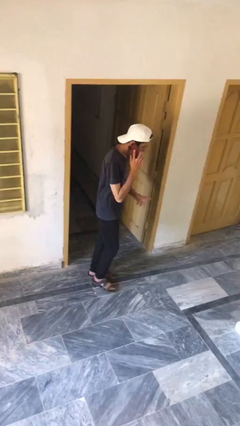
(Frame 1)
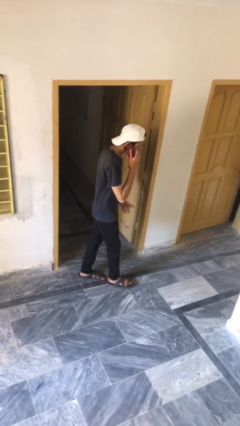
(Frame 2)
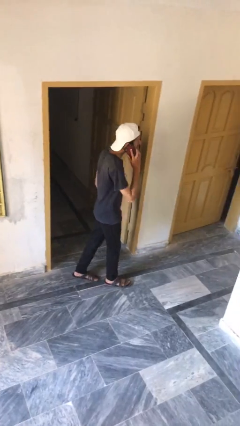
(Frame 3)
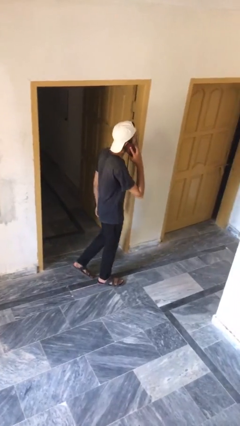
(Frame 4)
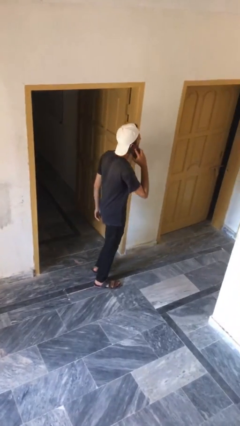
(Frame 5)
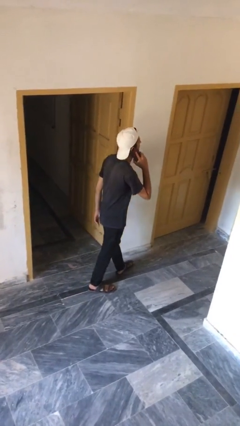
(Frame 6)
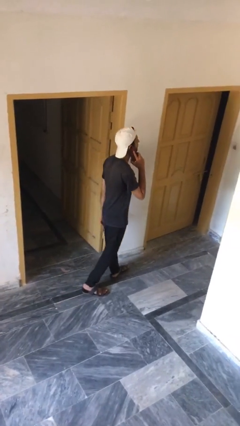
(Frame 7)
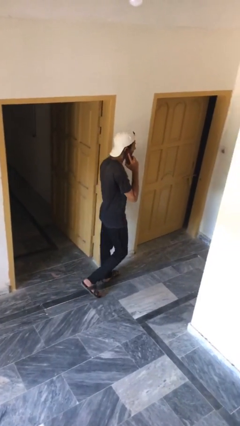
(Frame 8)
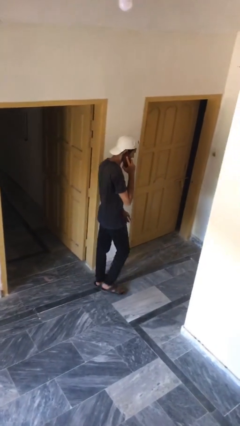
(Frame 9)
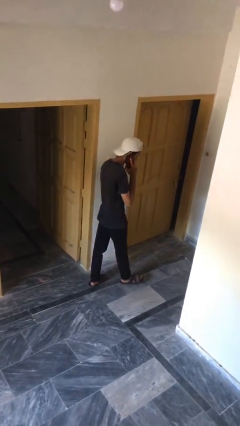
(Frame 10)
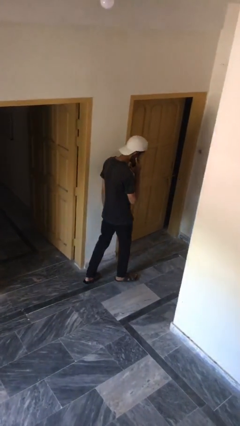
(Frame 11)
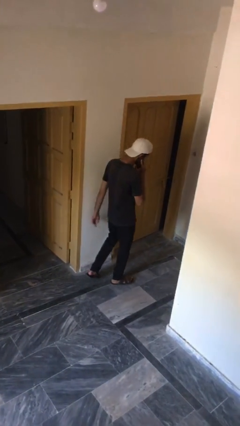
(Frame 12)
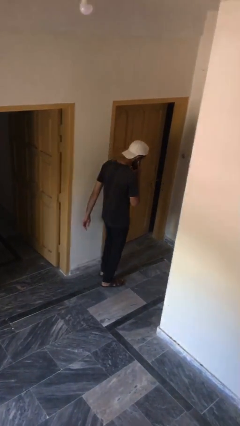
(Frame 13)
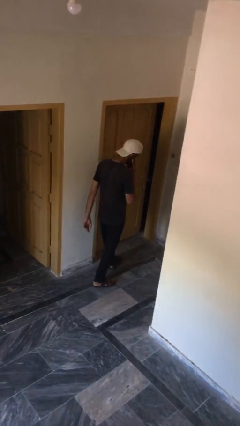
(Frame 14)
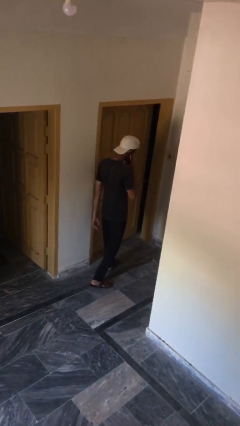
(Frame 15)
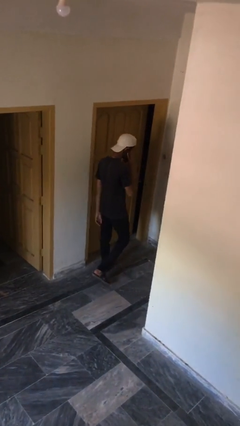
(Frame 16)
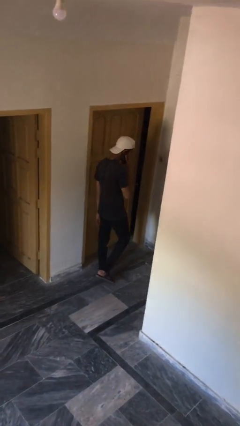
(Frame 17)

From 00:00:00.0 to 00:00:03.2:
person talks on phone

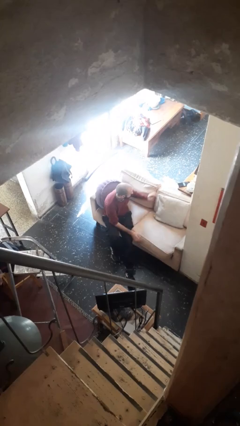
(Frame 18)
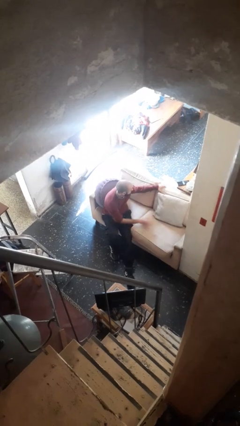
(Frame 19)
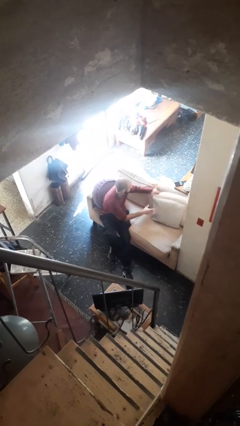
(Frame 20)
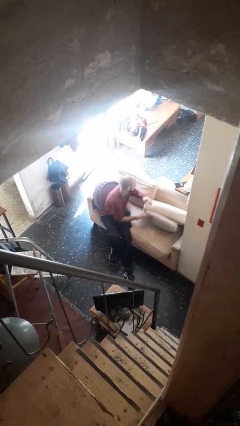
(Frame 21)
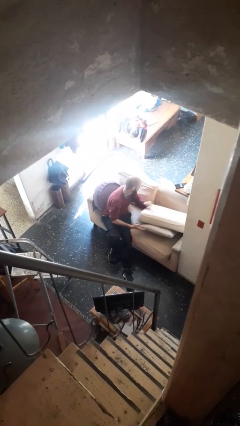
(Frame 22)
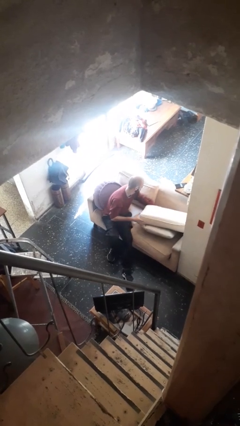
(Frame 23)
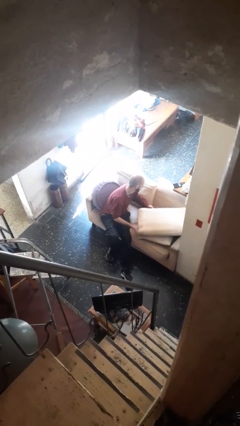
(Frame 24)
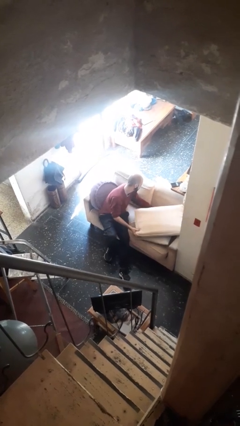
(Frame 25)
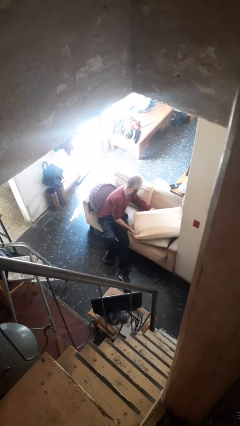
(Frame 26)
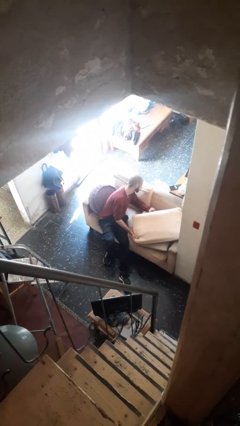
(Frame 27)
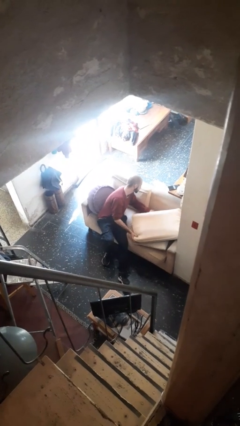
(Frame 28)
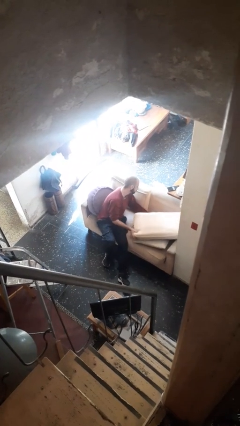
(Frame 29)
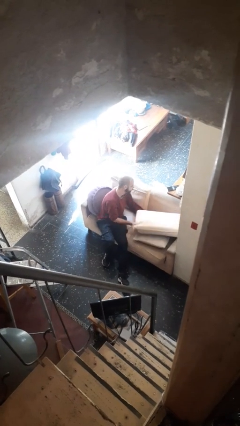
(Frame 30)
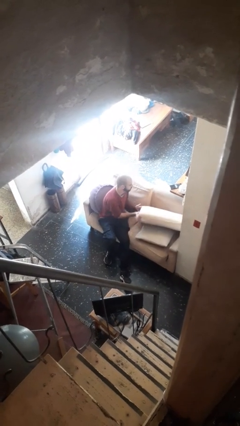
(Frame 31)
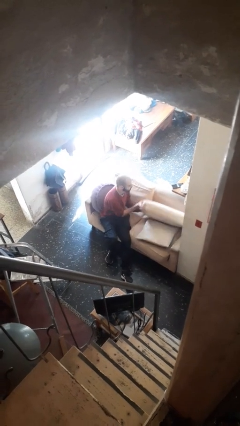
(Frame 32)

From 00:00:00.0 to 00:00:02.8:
person searches in couch

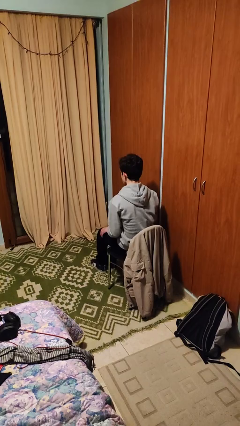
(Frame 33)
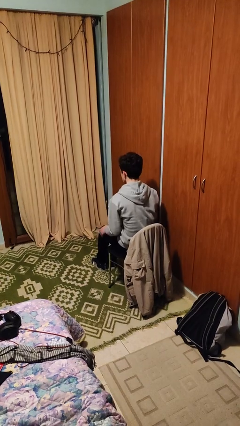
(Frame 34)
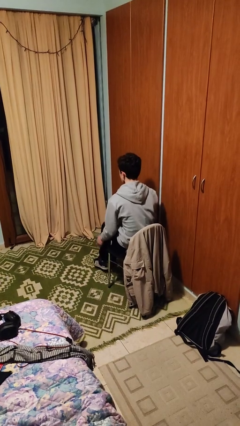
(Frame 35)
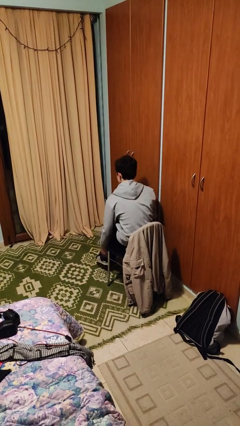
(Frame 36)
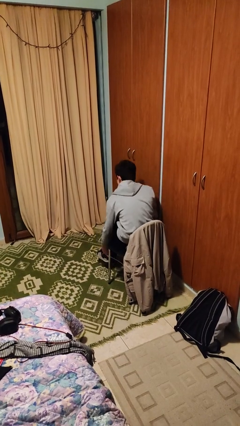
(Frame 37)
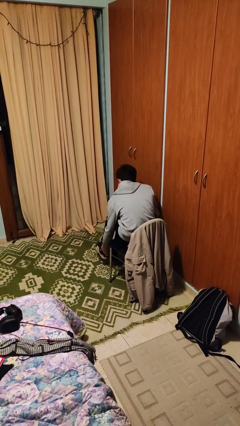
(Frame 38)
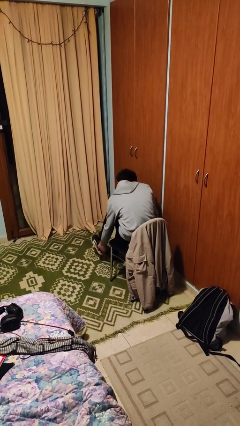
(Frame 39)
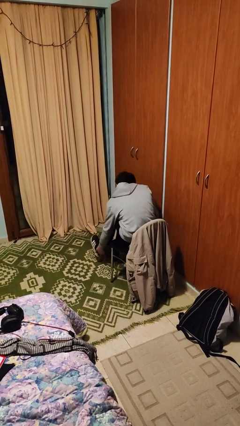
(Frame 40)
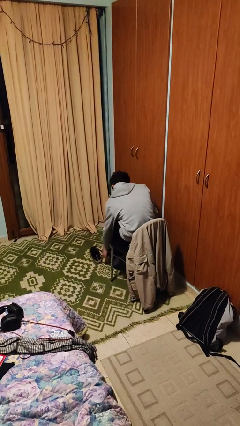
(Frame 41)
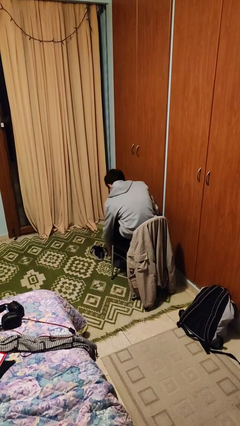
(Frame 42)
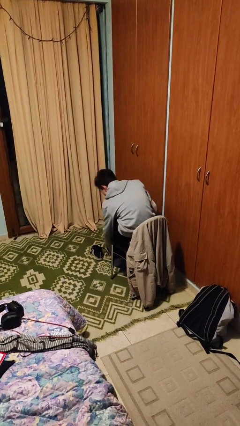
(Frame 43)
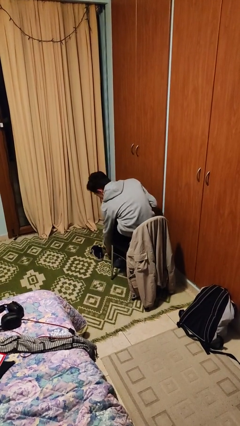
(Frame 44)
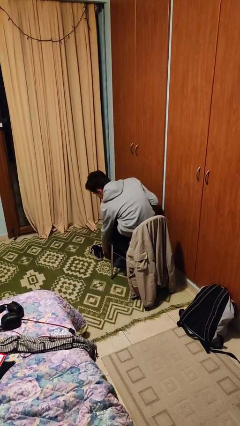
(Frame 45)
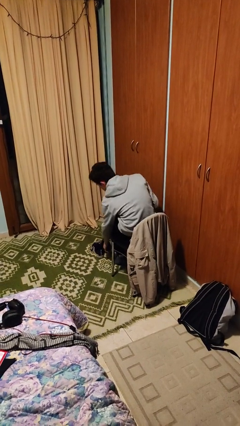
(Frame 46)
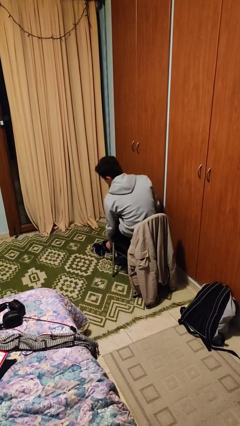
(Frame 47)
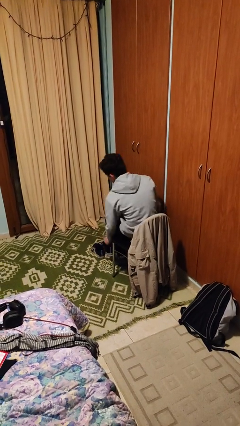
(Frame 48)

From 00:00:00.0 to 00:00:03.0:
person takes off shoes

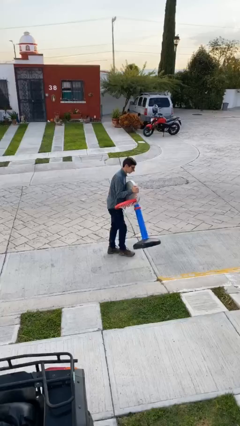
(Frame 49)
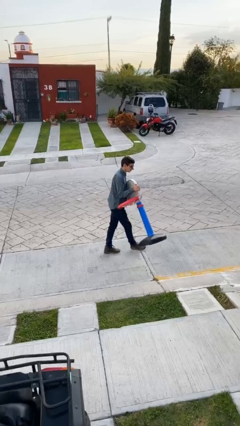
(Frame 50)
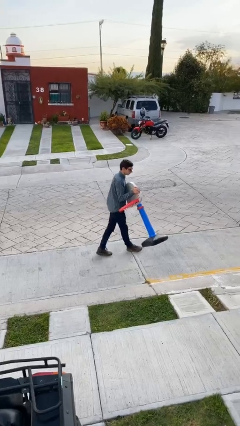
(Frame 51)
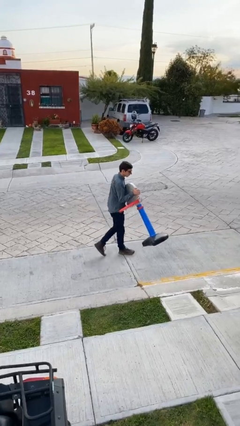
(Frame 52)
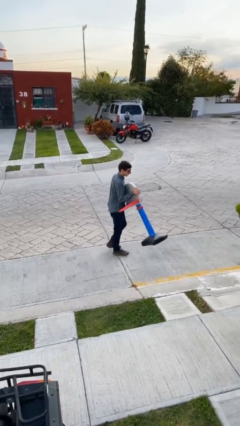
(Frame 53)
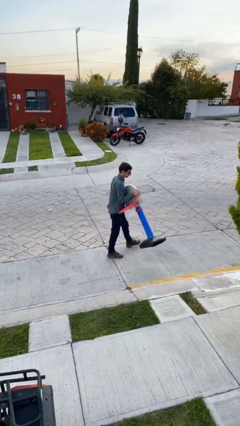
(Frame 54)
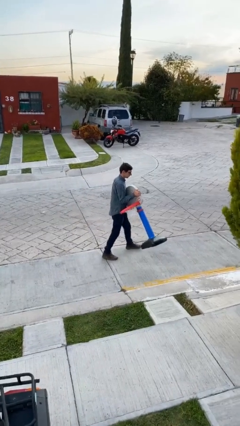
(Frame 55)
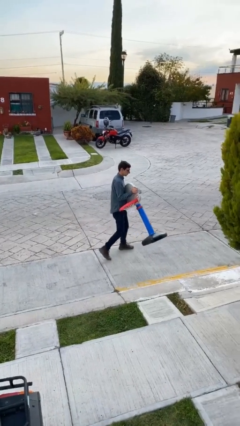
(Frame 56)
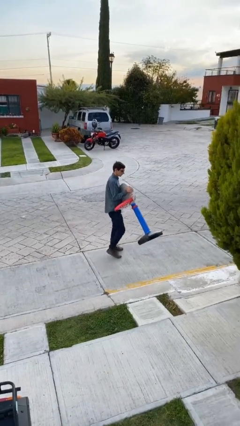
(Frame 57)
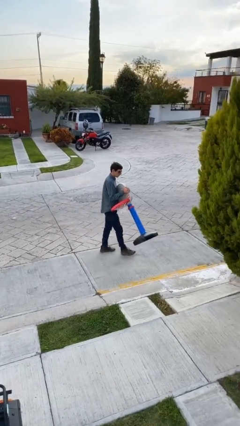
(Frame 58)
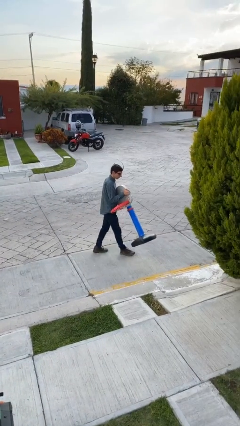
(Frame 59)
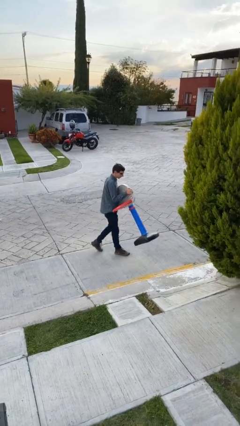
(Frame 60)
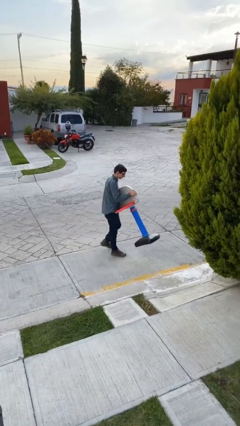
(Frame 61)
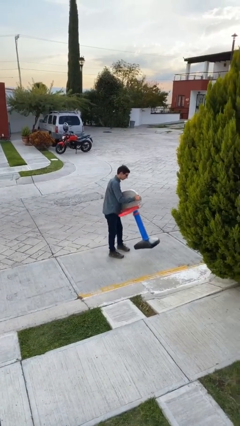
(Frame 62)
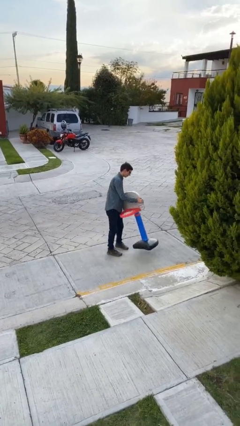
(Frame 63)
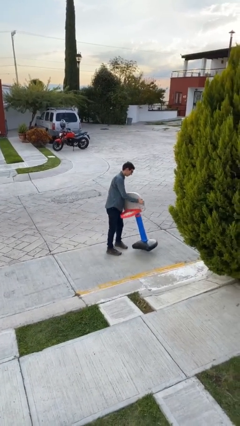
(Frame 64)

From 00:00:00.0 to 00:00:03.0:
person carries heavy object

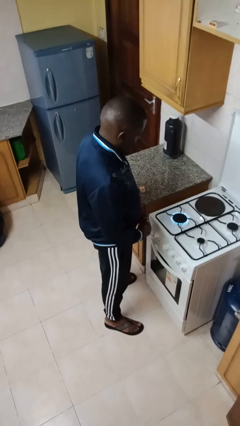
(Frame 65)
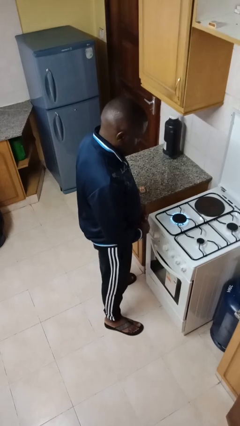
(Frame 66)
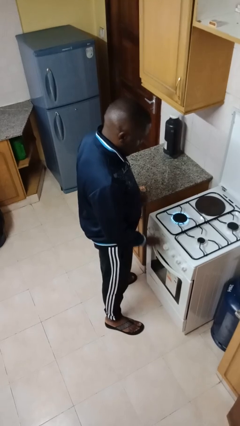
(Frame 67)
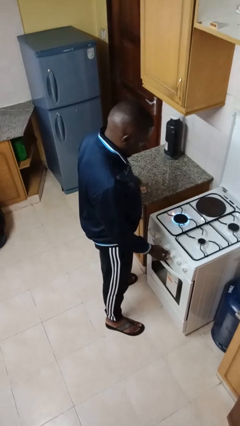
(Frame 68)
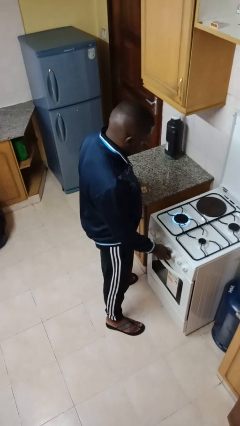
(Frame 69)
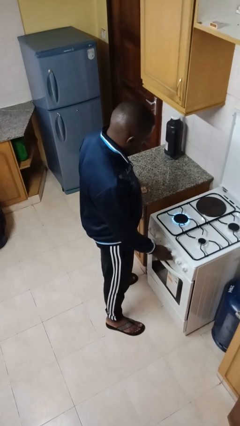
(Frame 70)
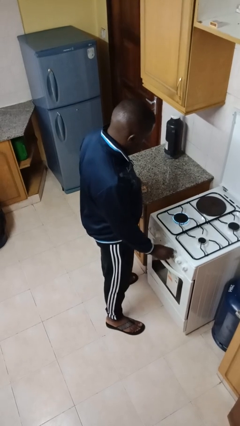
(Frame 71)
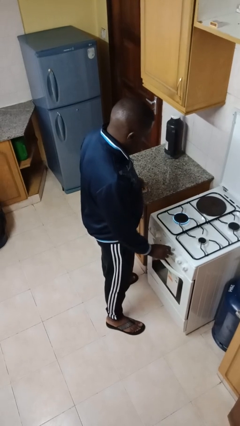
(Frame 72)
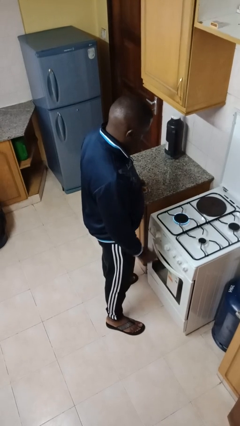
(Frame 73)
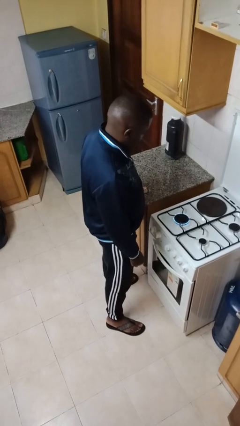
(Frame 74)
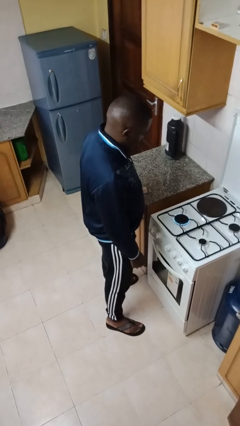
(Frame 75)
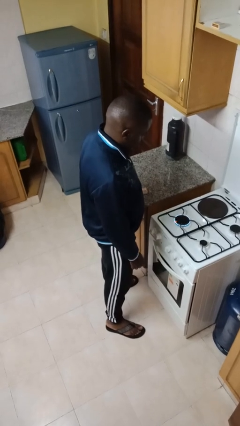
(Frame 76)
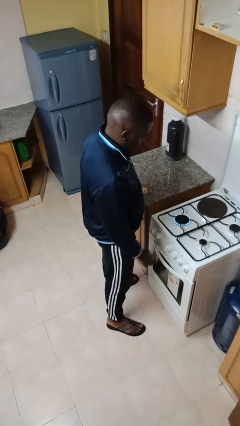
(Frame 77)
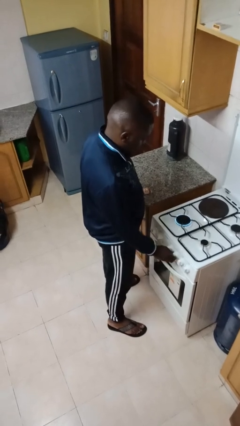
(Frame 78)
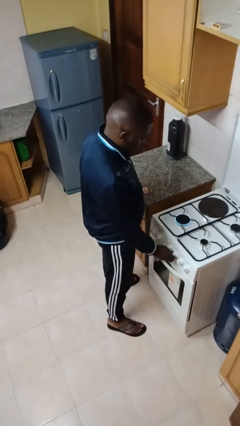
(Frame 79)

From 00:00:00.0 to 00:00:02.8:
person turns off stovetop

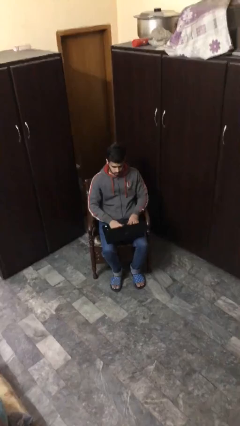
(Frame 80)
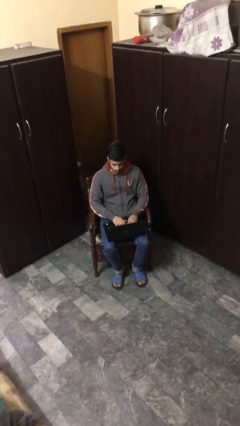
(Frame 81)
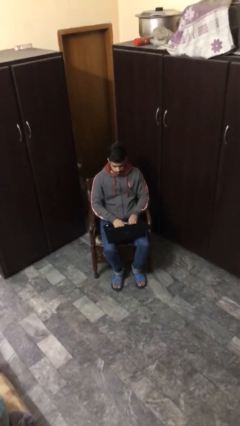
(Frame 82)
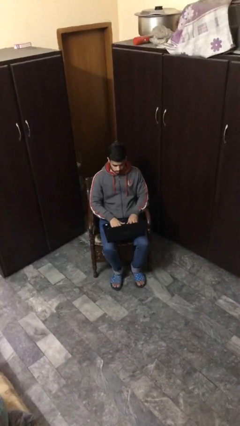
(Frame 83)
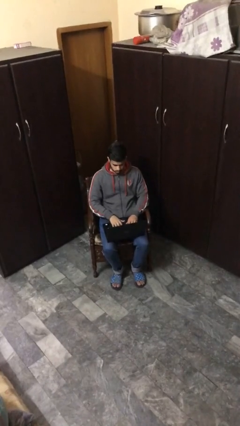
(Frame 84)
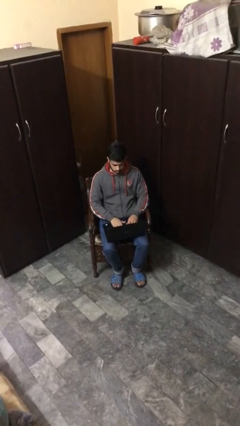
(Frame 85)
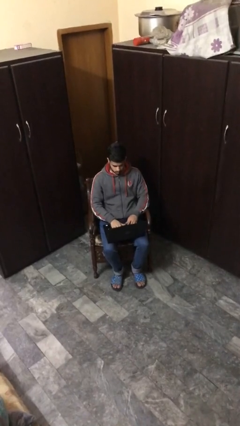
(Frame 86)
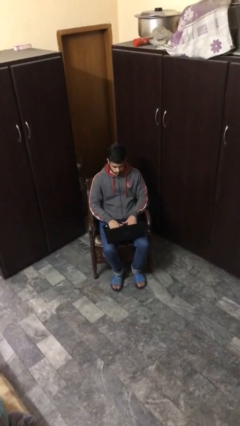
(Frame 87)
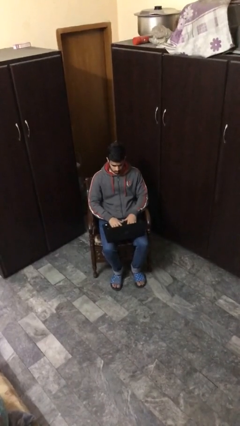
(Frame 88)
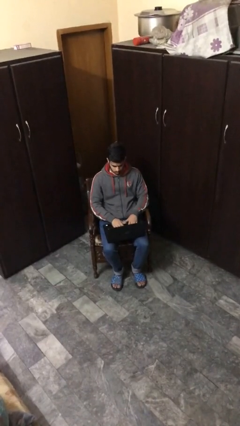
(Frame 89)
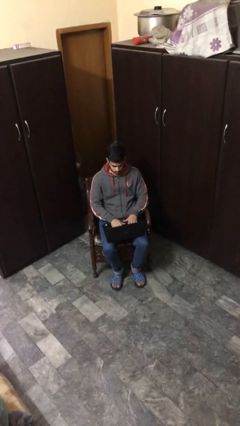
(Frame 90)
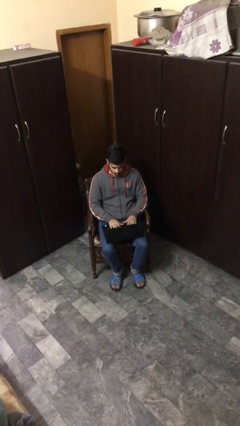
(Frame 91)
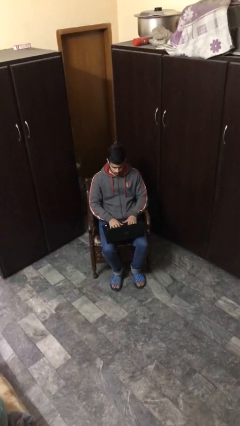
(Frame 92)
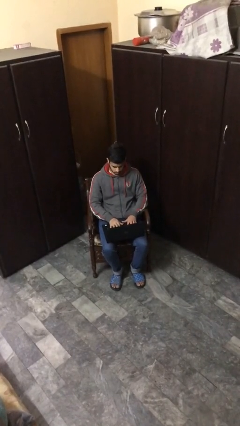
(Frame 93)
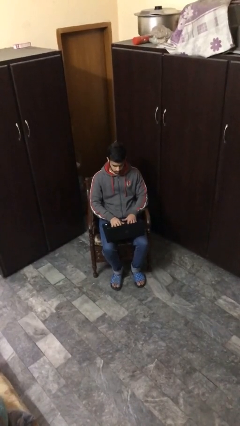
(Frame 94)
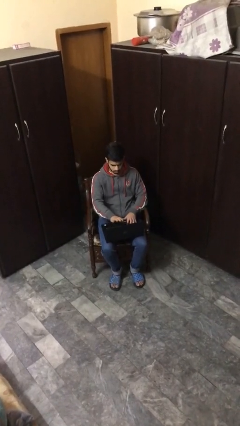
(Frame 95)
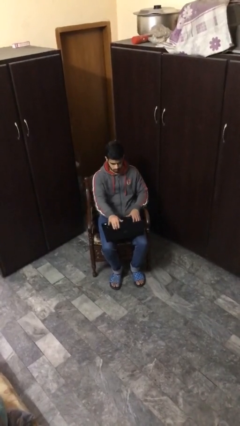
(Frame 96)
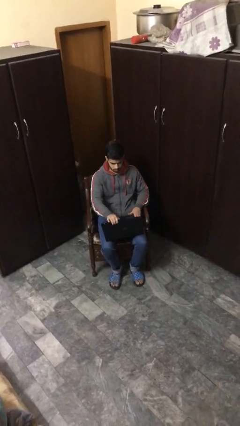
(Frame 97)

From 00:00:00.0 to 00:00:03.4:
person interacts with laptop
